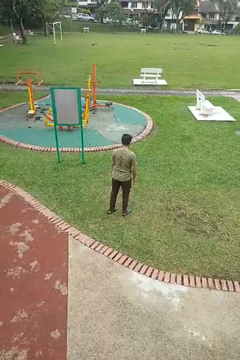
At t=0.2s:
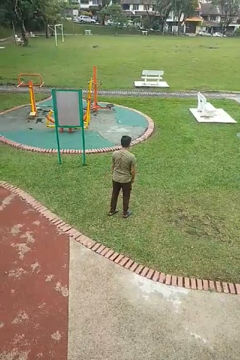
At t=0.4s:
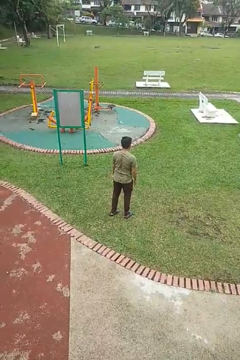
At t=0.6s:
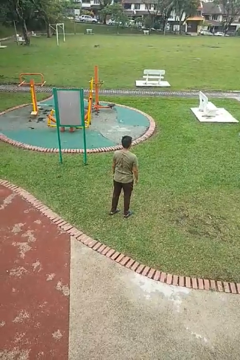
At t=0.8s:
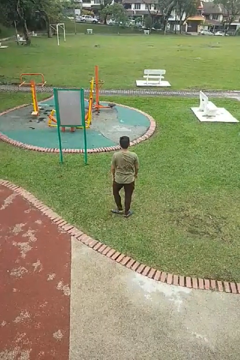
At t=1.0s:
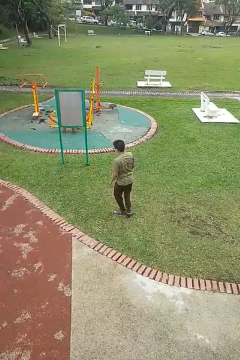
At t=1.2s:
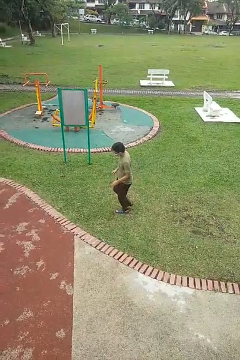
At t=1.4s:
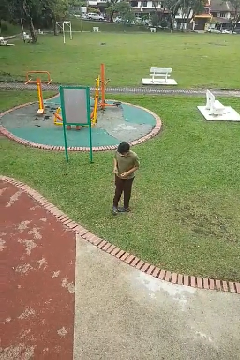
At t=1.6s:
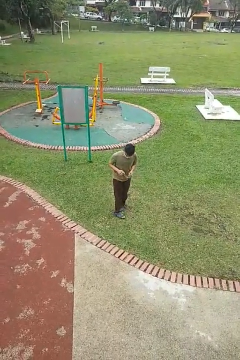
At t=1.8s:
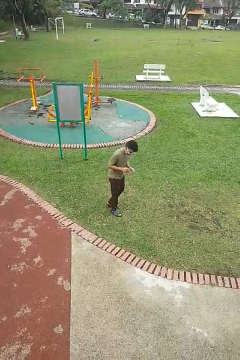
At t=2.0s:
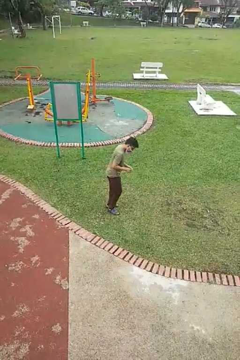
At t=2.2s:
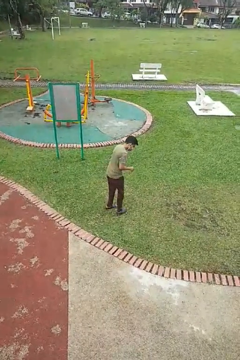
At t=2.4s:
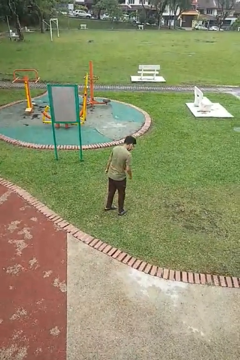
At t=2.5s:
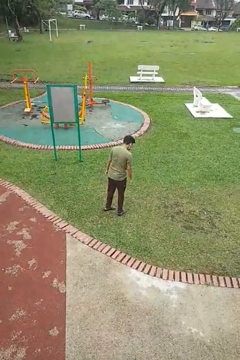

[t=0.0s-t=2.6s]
person twirls

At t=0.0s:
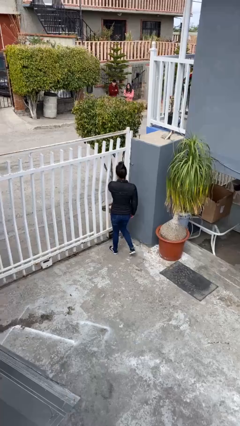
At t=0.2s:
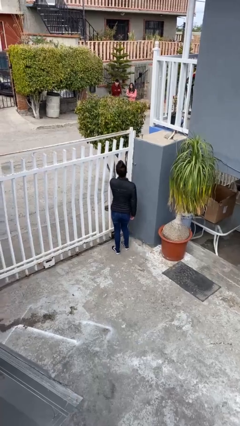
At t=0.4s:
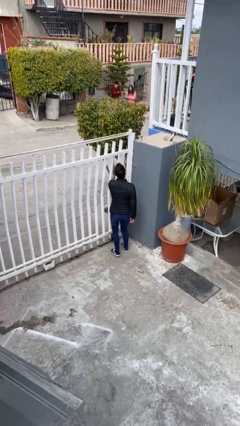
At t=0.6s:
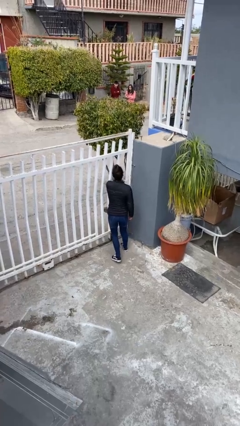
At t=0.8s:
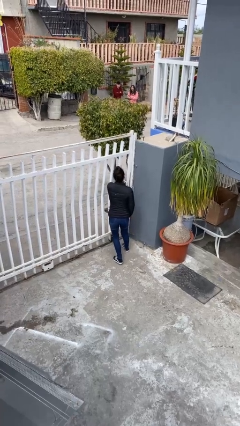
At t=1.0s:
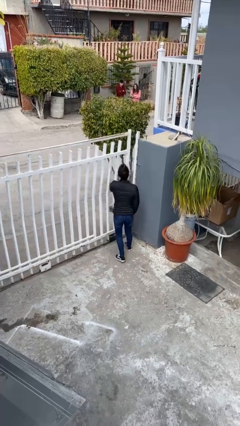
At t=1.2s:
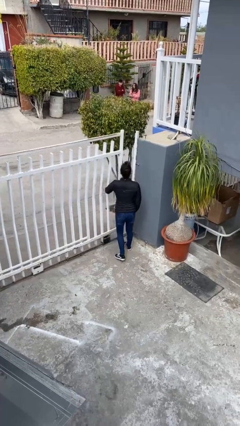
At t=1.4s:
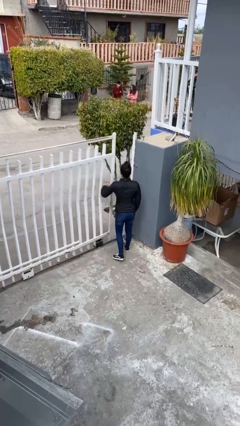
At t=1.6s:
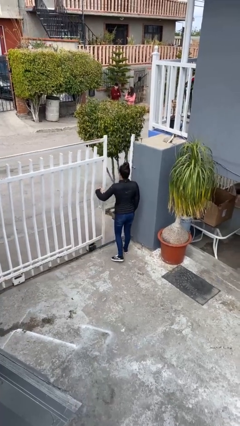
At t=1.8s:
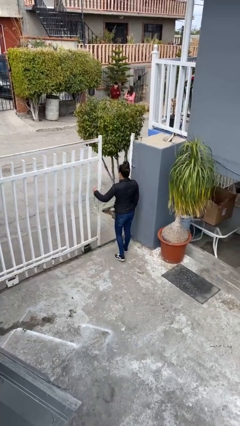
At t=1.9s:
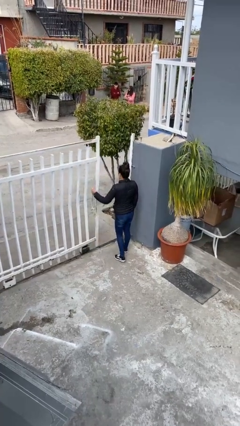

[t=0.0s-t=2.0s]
person opens facility door

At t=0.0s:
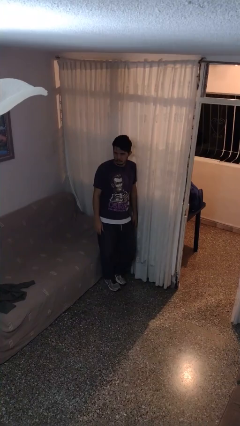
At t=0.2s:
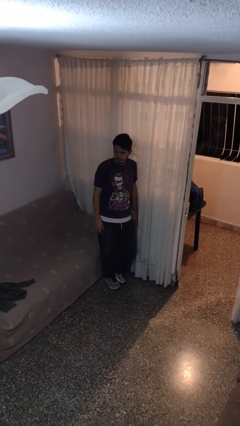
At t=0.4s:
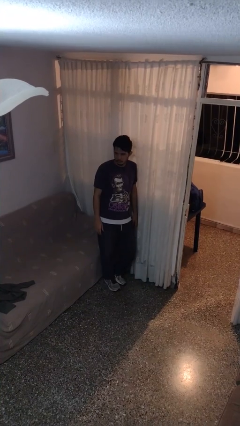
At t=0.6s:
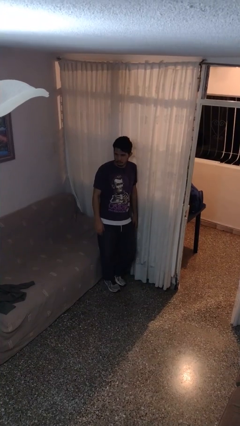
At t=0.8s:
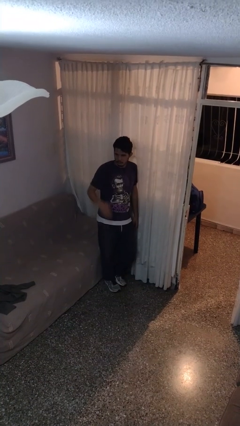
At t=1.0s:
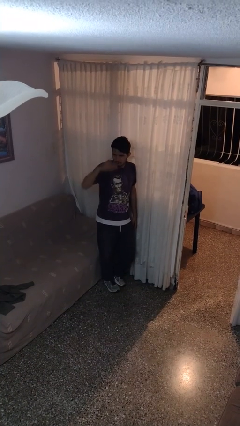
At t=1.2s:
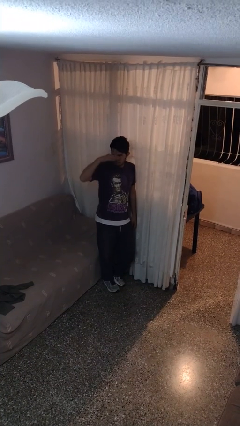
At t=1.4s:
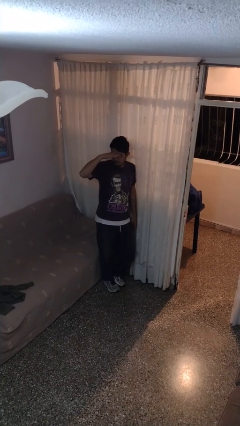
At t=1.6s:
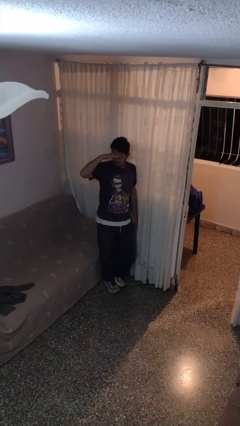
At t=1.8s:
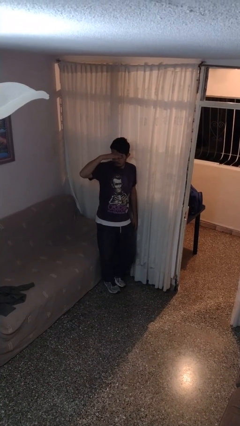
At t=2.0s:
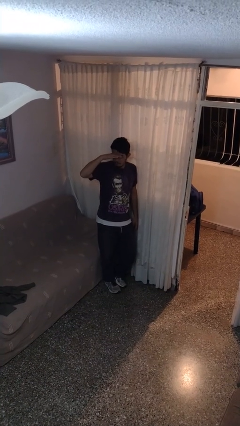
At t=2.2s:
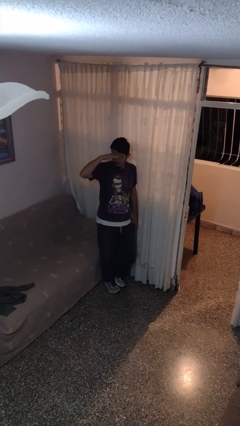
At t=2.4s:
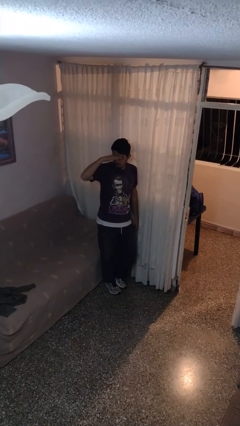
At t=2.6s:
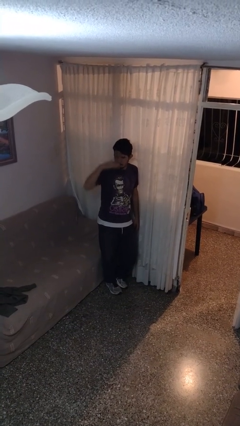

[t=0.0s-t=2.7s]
person shades eyes

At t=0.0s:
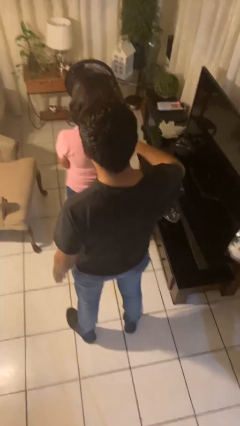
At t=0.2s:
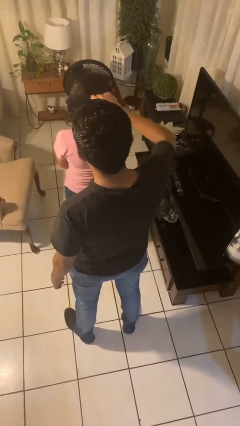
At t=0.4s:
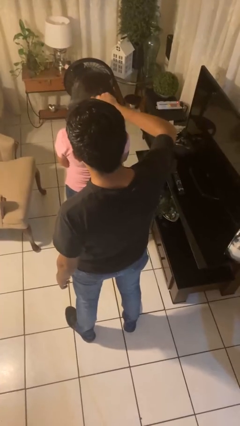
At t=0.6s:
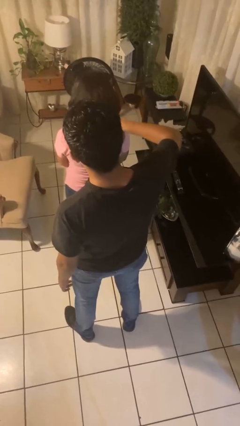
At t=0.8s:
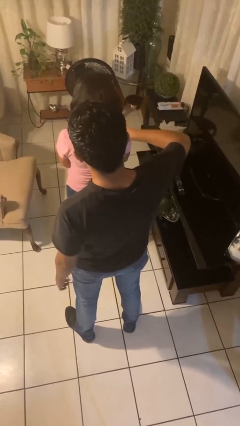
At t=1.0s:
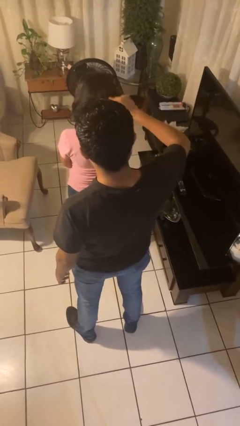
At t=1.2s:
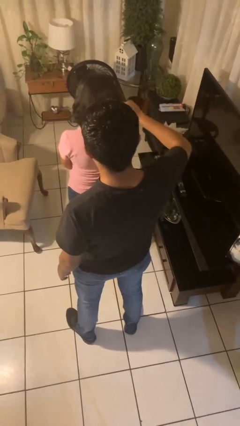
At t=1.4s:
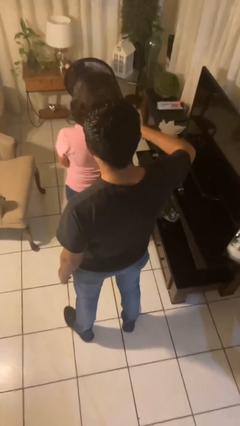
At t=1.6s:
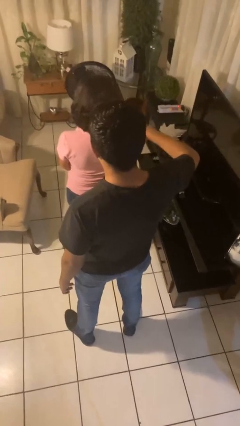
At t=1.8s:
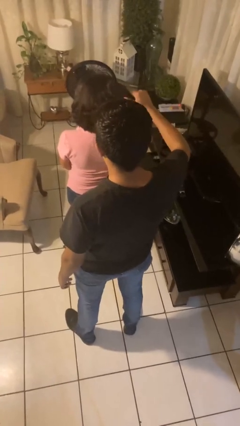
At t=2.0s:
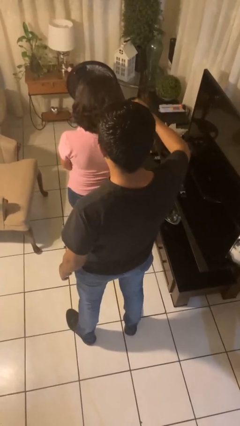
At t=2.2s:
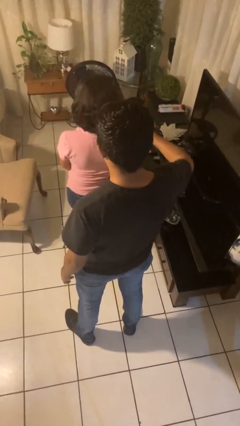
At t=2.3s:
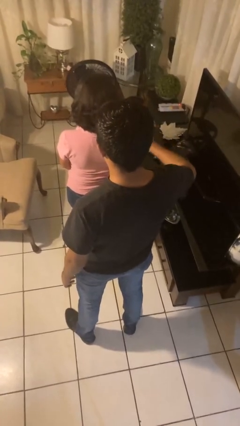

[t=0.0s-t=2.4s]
person brushes hair of person

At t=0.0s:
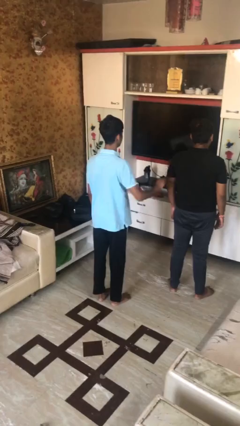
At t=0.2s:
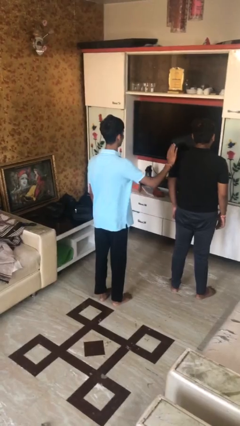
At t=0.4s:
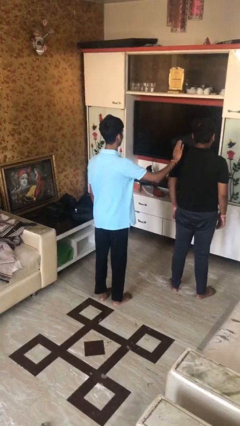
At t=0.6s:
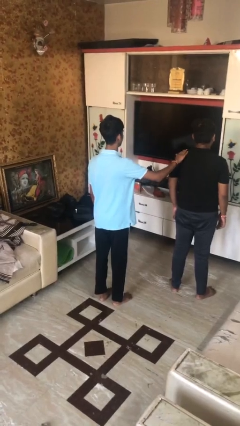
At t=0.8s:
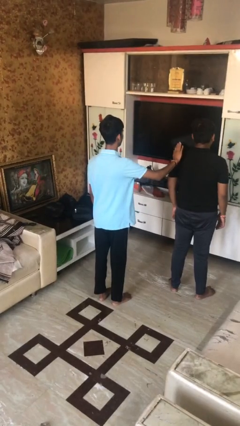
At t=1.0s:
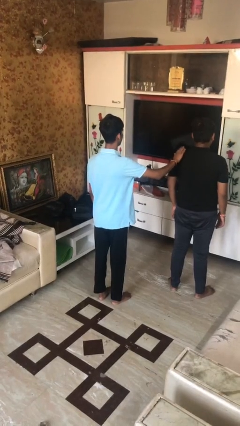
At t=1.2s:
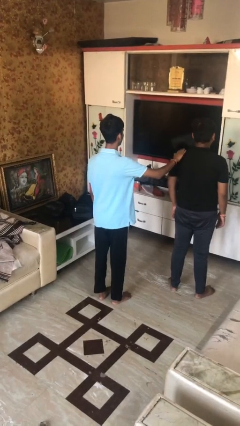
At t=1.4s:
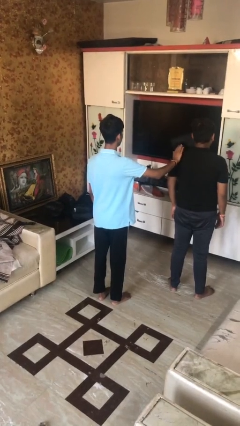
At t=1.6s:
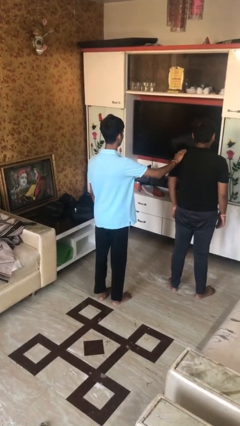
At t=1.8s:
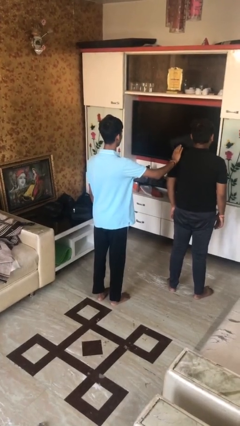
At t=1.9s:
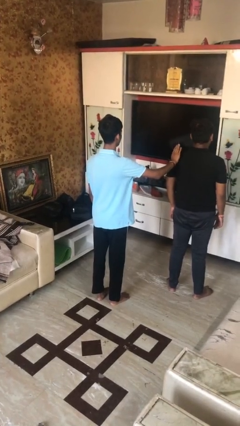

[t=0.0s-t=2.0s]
person pounds shoulders of person

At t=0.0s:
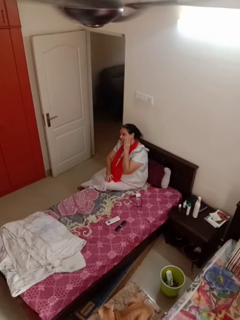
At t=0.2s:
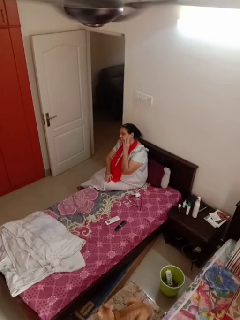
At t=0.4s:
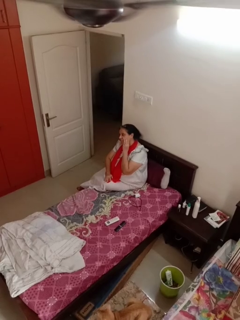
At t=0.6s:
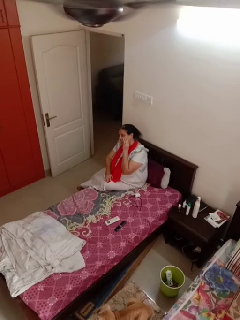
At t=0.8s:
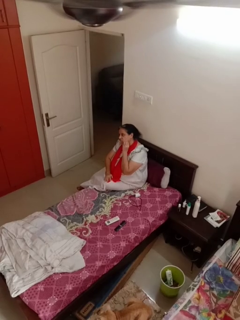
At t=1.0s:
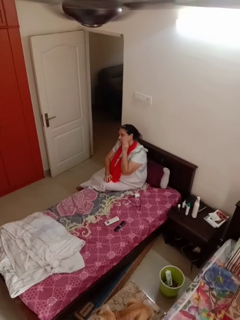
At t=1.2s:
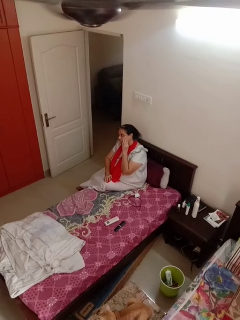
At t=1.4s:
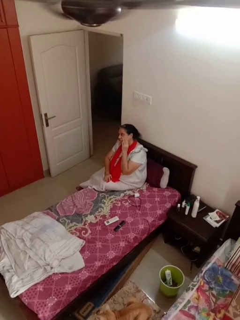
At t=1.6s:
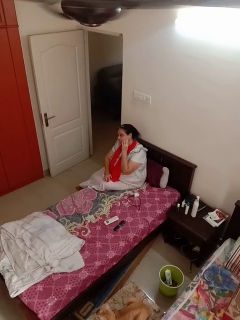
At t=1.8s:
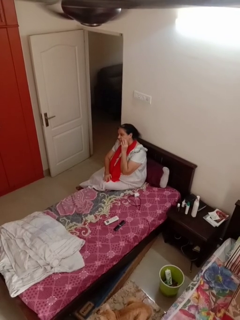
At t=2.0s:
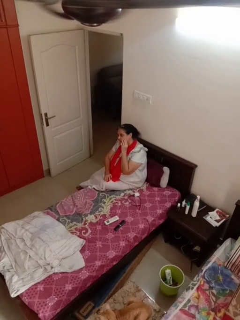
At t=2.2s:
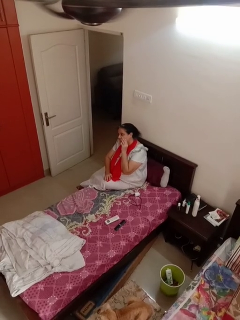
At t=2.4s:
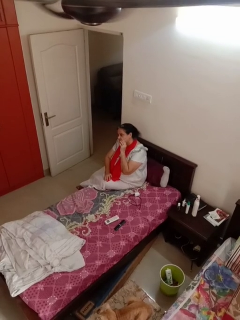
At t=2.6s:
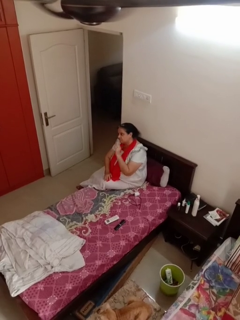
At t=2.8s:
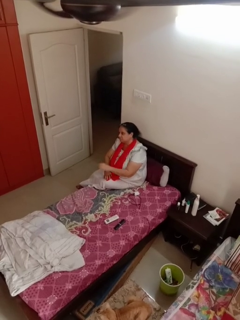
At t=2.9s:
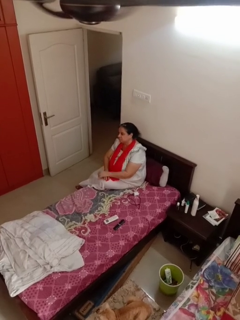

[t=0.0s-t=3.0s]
person scratches face

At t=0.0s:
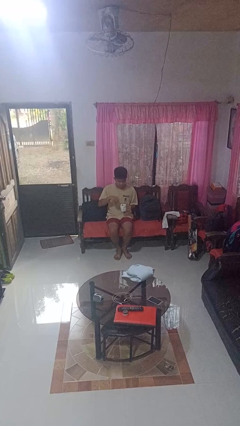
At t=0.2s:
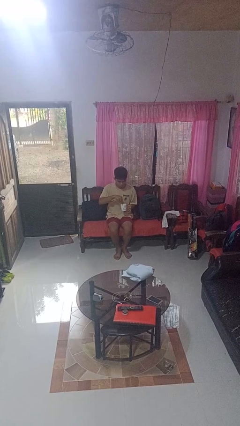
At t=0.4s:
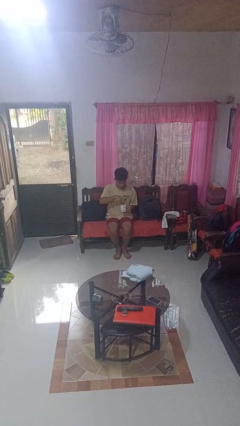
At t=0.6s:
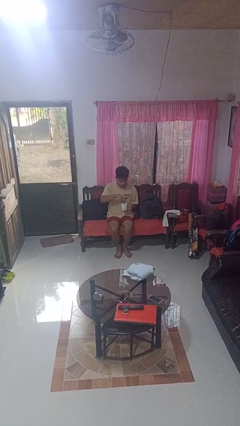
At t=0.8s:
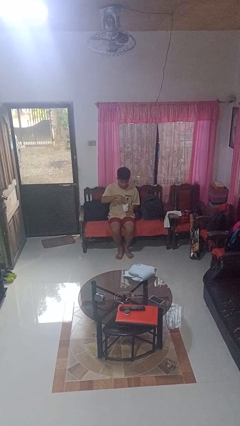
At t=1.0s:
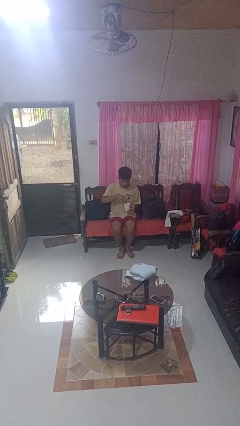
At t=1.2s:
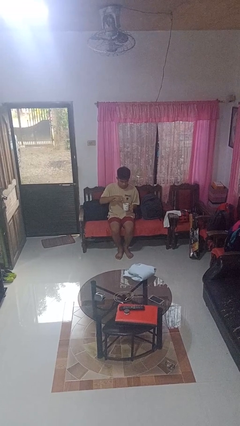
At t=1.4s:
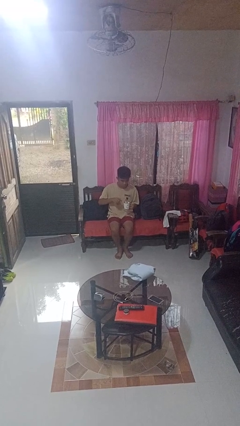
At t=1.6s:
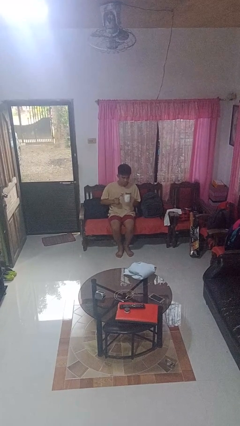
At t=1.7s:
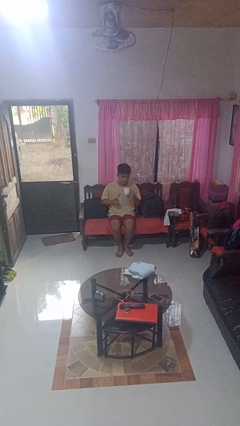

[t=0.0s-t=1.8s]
person stirs mug

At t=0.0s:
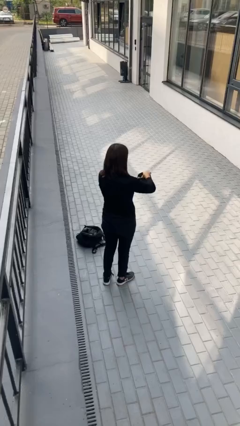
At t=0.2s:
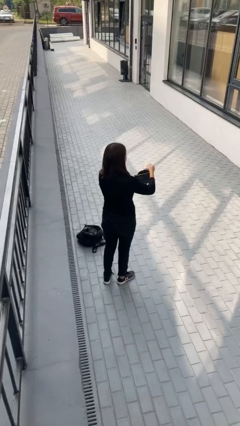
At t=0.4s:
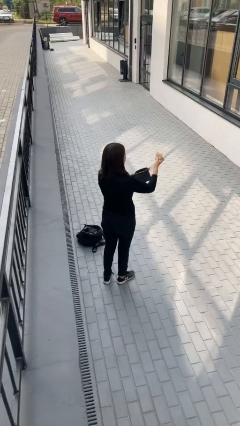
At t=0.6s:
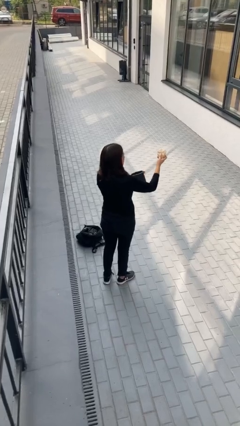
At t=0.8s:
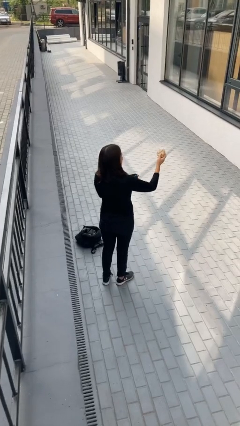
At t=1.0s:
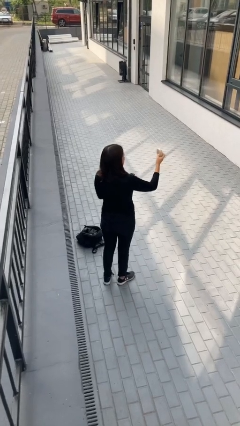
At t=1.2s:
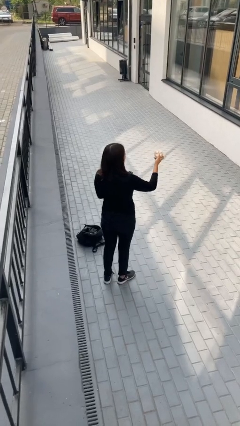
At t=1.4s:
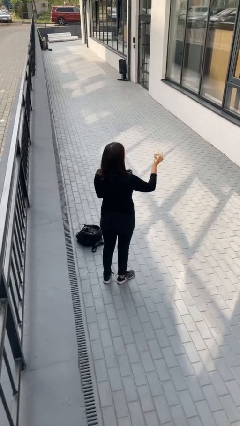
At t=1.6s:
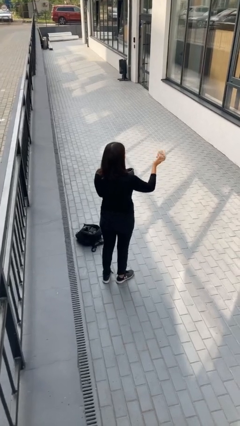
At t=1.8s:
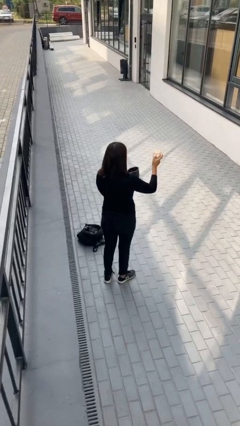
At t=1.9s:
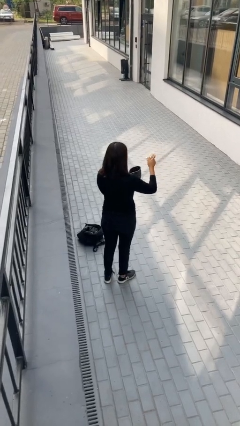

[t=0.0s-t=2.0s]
person takes object from purse
